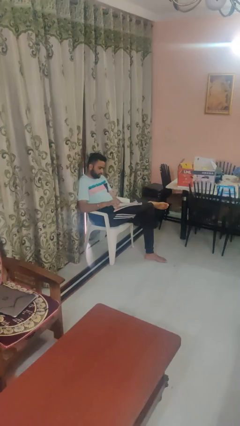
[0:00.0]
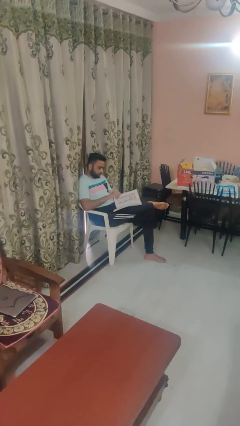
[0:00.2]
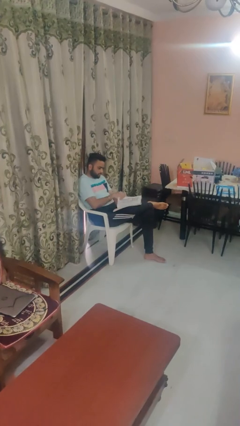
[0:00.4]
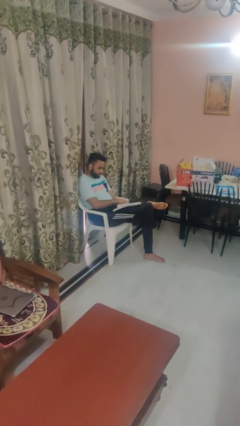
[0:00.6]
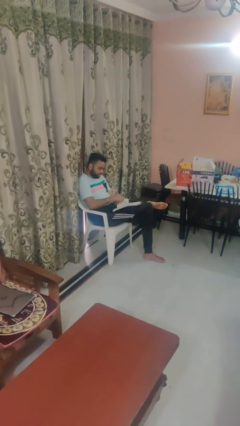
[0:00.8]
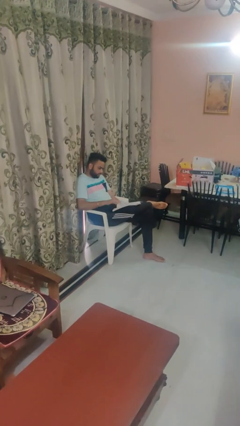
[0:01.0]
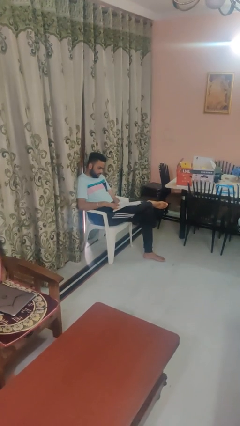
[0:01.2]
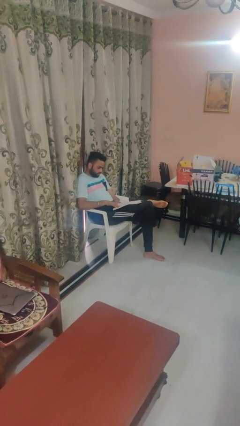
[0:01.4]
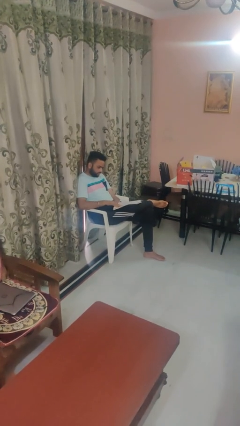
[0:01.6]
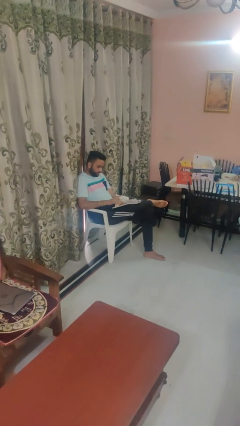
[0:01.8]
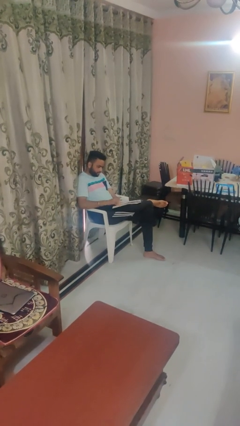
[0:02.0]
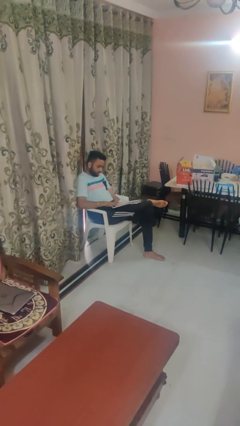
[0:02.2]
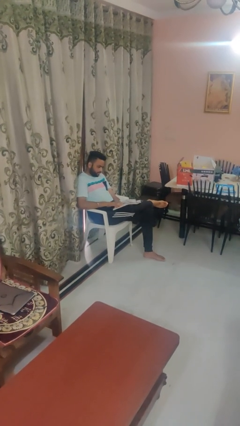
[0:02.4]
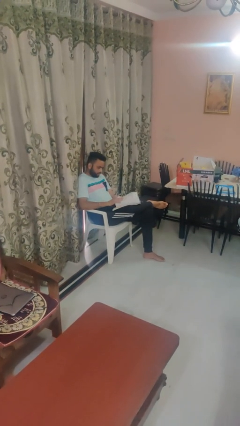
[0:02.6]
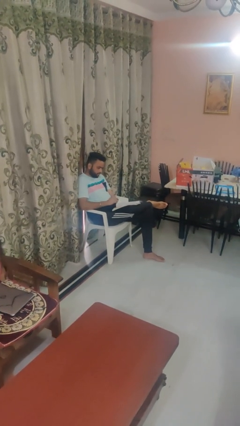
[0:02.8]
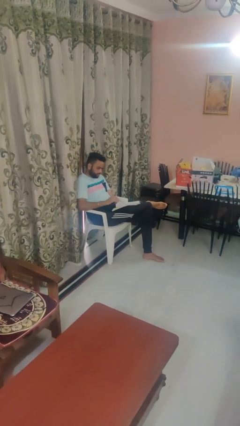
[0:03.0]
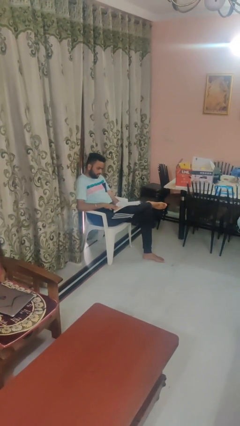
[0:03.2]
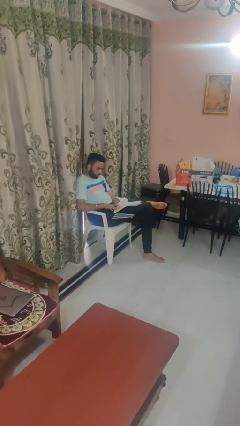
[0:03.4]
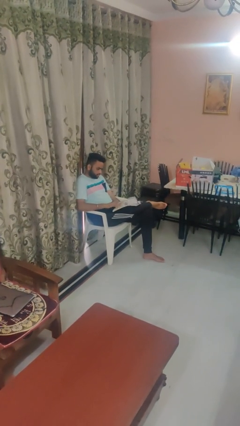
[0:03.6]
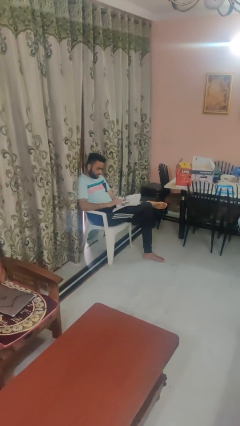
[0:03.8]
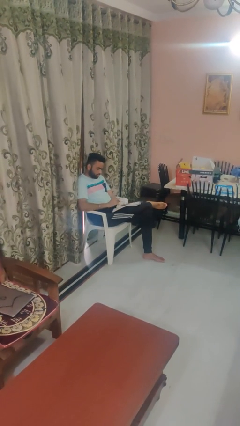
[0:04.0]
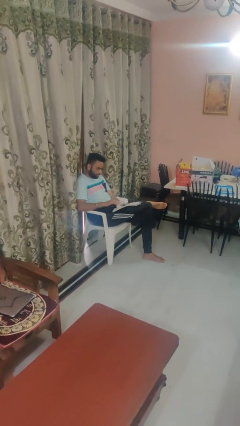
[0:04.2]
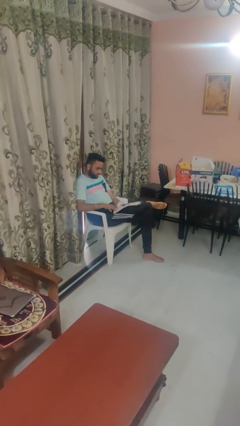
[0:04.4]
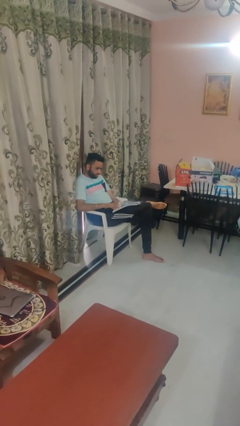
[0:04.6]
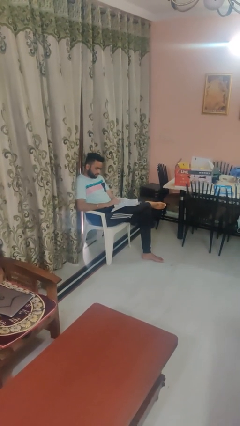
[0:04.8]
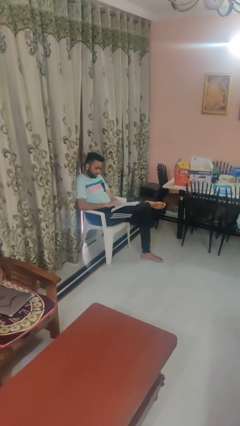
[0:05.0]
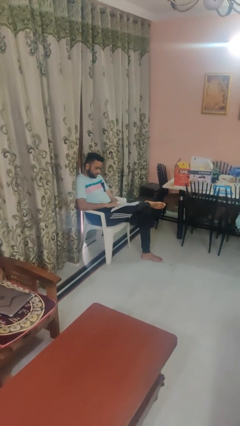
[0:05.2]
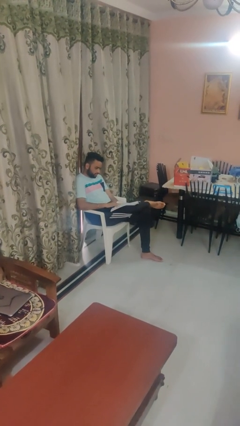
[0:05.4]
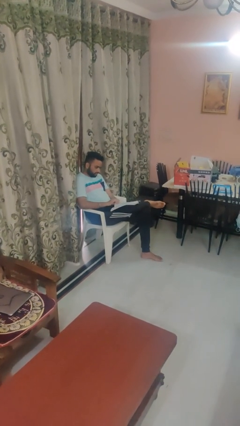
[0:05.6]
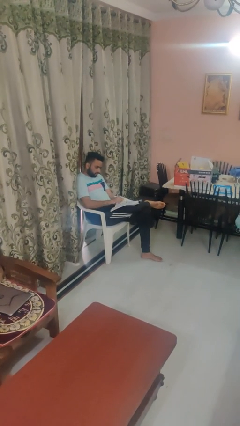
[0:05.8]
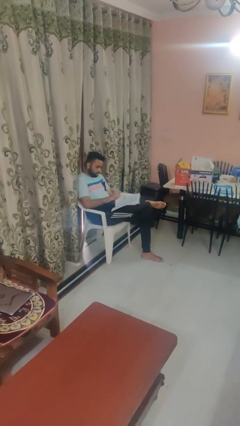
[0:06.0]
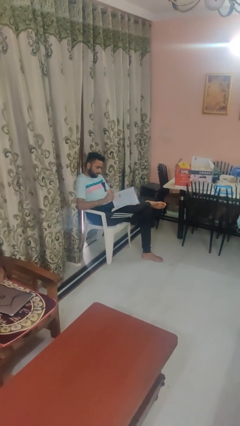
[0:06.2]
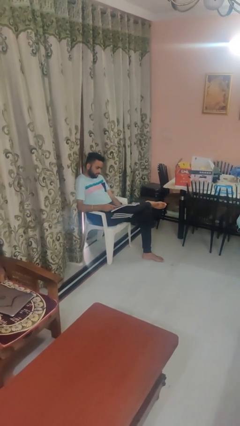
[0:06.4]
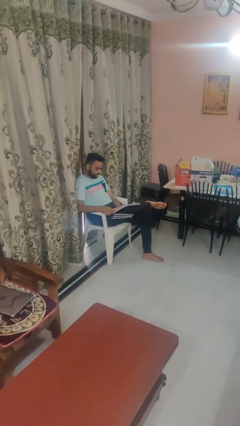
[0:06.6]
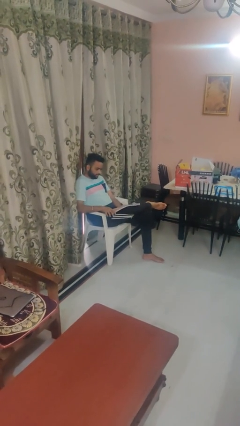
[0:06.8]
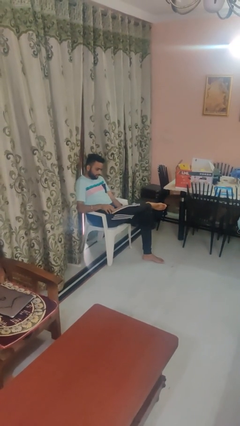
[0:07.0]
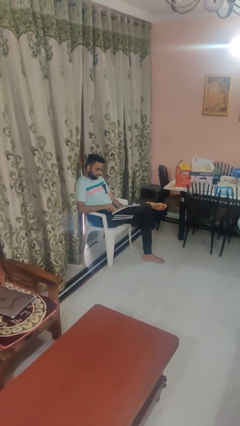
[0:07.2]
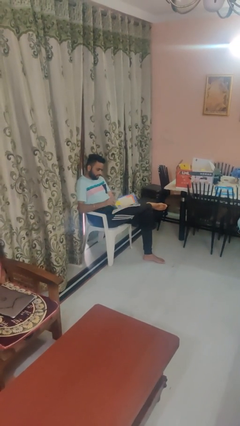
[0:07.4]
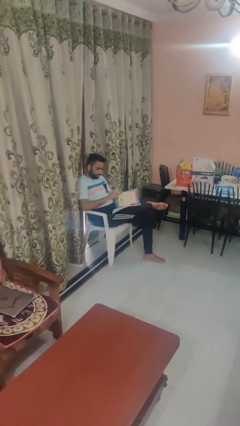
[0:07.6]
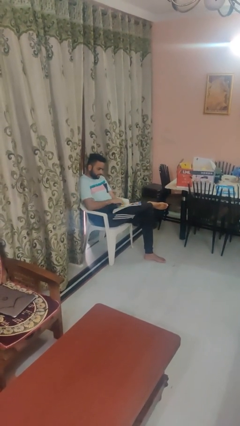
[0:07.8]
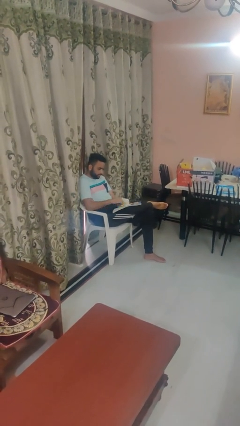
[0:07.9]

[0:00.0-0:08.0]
person reads magazine

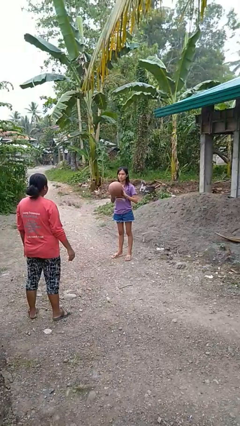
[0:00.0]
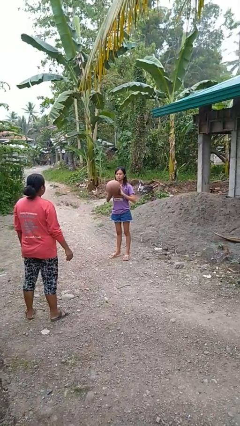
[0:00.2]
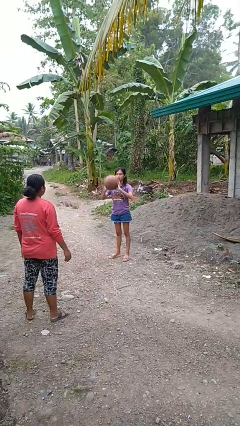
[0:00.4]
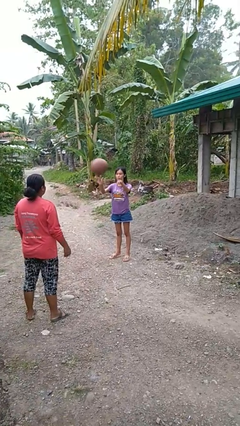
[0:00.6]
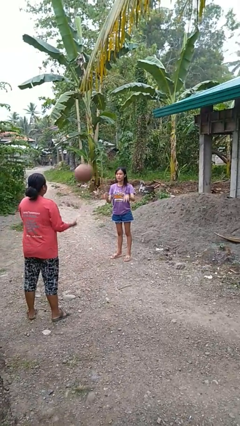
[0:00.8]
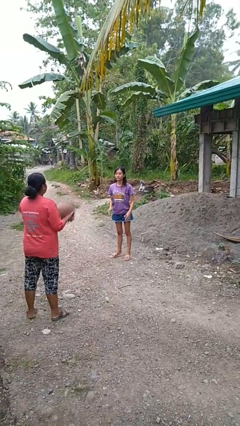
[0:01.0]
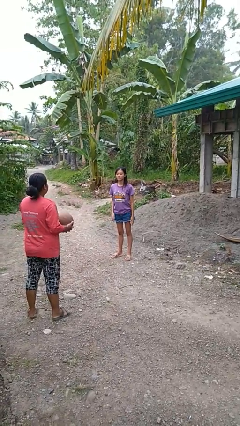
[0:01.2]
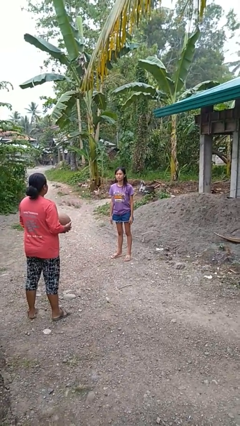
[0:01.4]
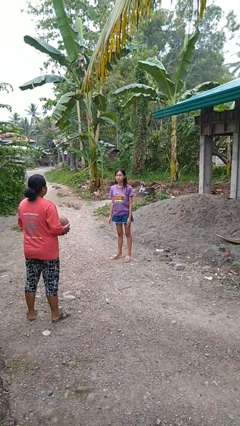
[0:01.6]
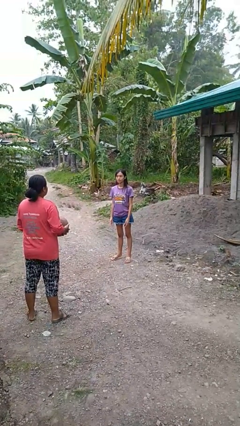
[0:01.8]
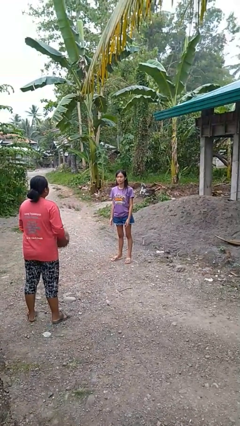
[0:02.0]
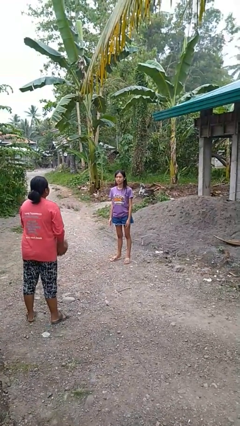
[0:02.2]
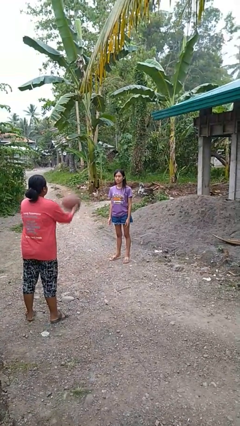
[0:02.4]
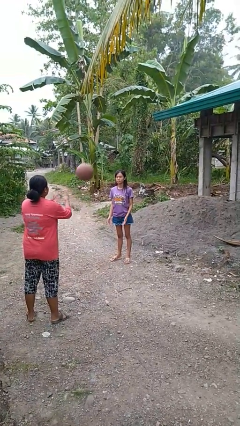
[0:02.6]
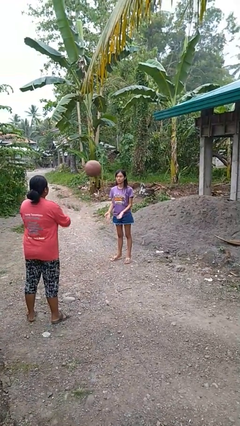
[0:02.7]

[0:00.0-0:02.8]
person throws object to person

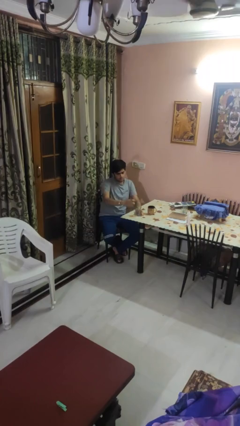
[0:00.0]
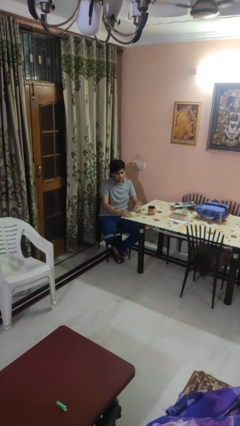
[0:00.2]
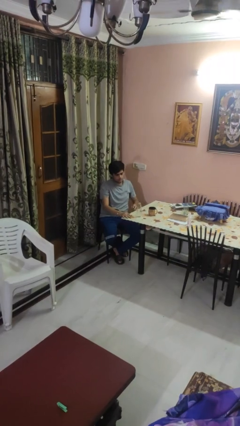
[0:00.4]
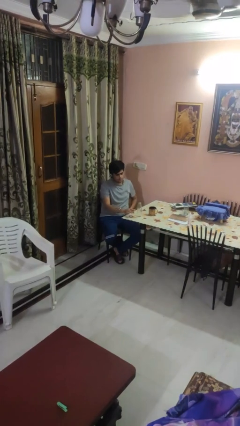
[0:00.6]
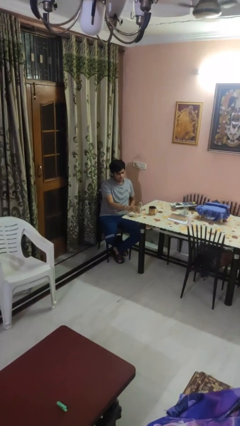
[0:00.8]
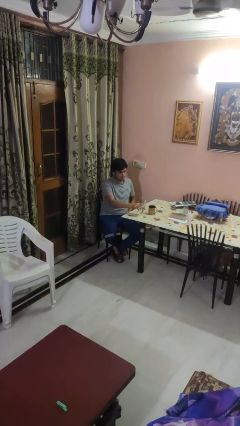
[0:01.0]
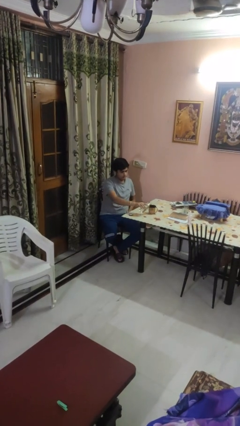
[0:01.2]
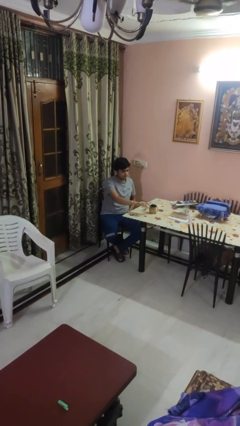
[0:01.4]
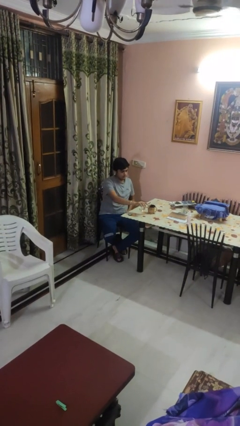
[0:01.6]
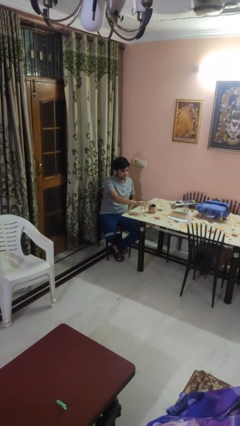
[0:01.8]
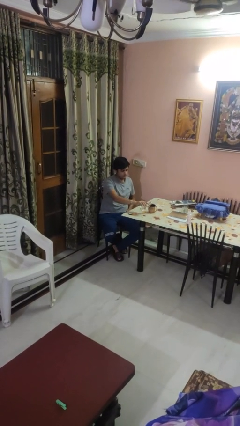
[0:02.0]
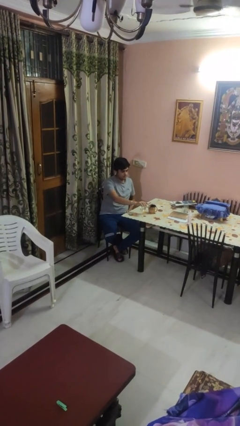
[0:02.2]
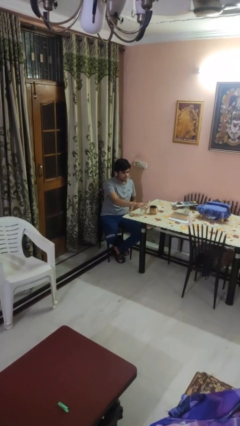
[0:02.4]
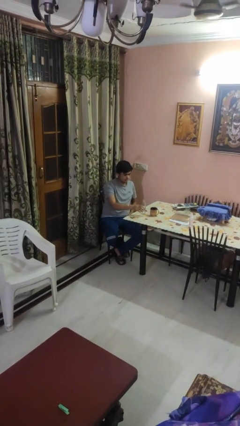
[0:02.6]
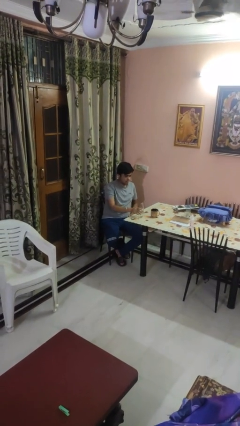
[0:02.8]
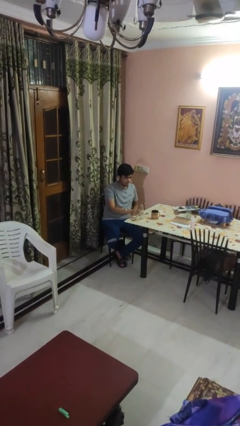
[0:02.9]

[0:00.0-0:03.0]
person pours liquid into cup

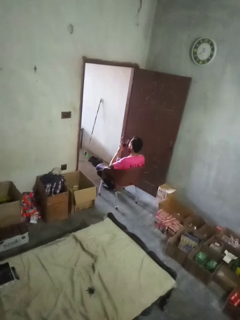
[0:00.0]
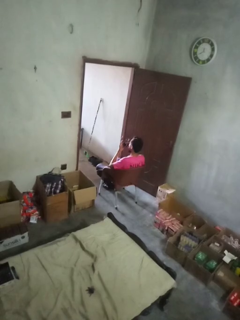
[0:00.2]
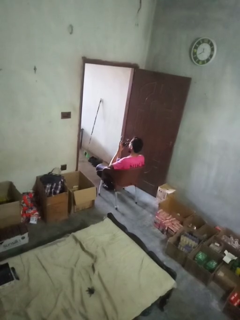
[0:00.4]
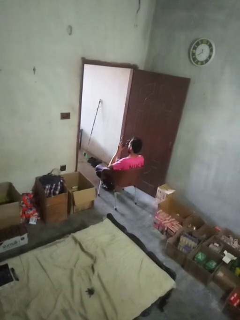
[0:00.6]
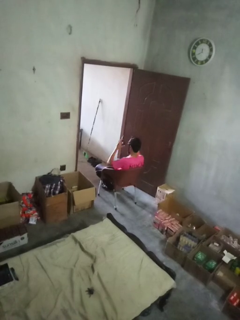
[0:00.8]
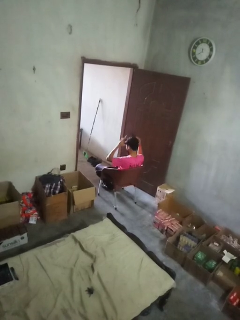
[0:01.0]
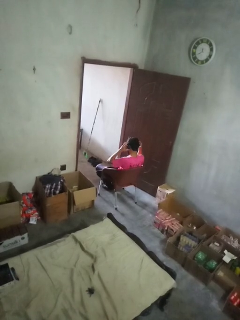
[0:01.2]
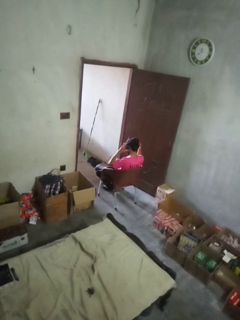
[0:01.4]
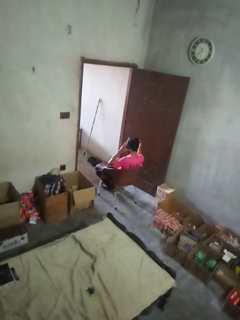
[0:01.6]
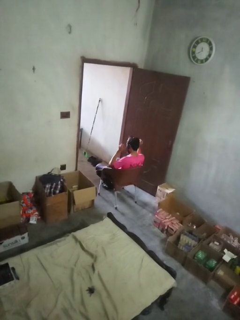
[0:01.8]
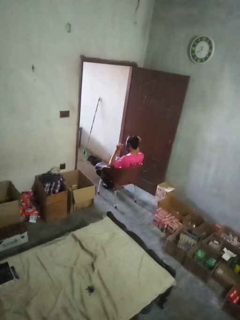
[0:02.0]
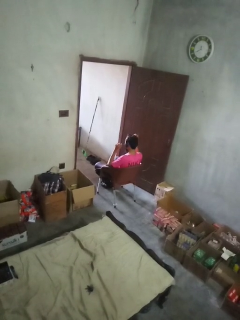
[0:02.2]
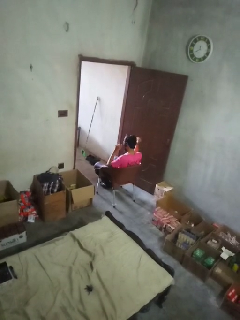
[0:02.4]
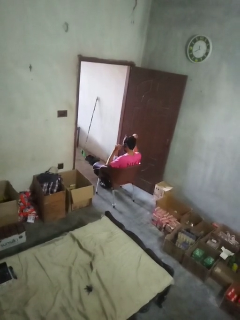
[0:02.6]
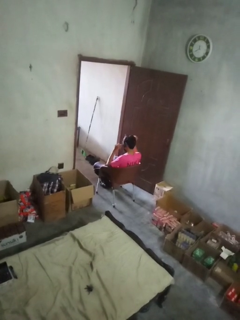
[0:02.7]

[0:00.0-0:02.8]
person puts on headphones

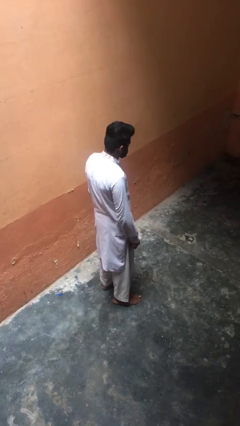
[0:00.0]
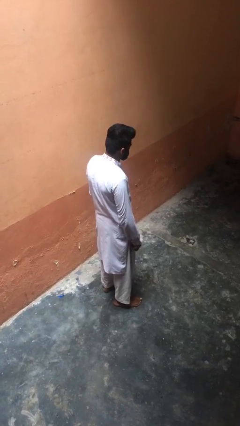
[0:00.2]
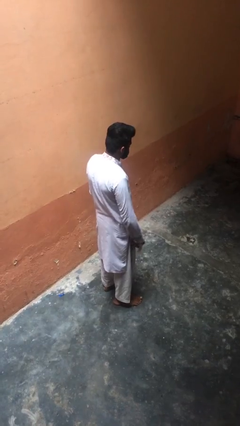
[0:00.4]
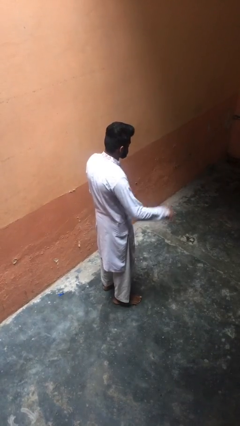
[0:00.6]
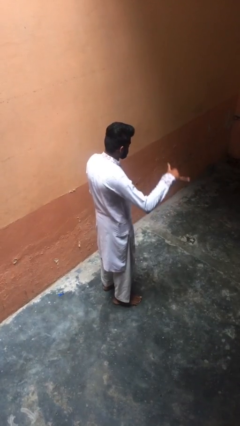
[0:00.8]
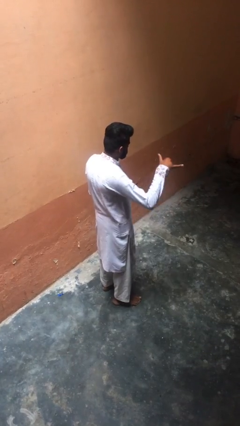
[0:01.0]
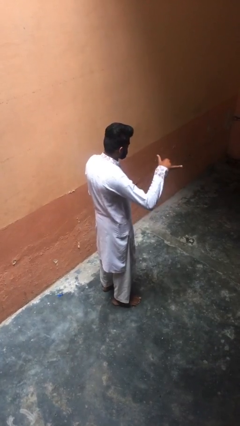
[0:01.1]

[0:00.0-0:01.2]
person gestures hang loose

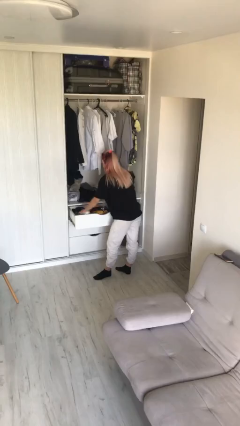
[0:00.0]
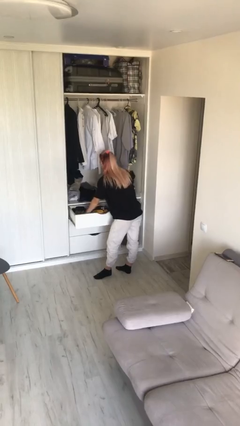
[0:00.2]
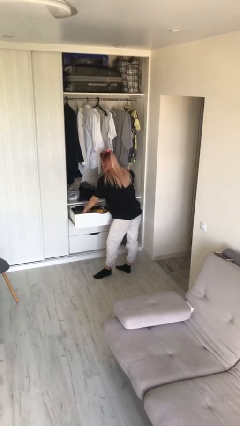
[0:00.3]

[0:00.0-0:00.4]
person puts clothes into dresser
